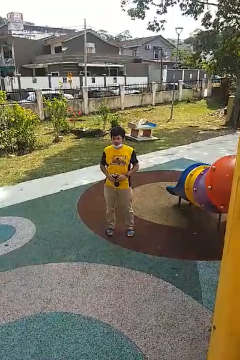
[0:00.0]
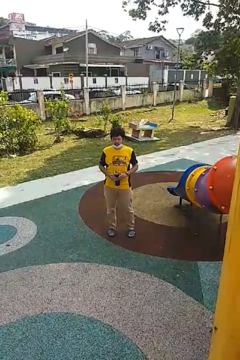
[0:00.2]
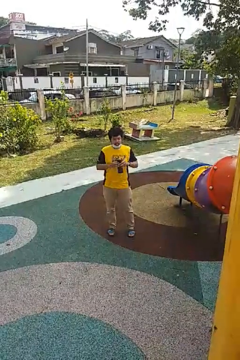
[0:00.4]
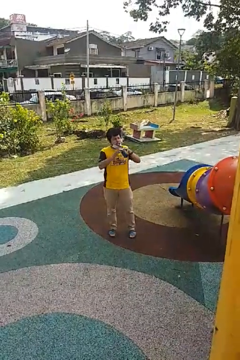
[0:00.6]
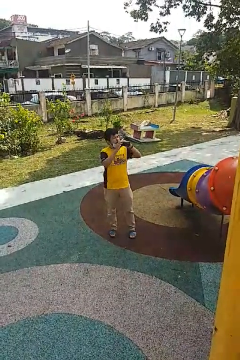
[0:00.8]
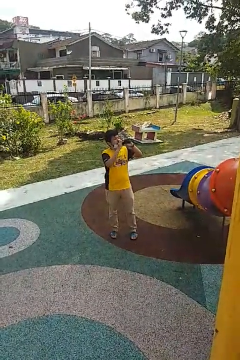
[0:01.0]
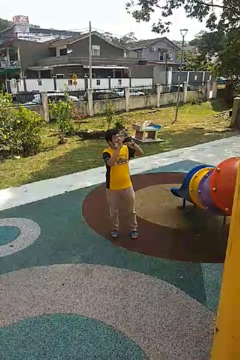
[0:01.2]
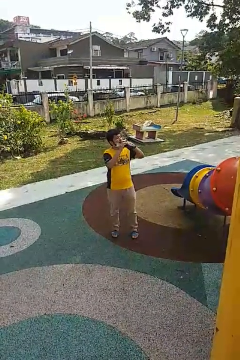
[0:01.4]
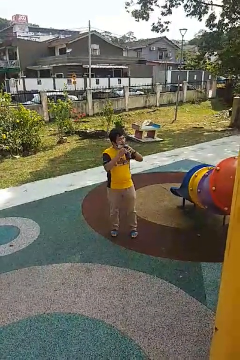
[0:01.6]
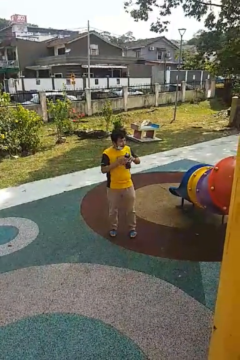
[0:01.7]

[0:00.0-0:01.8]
person drinks from bottle

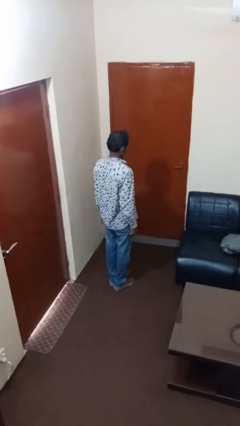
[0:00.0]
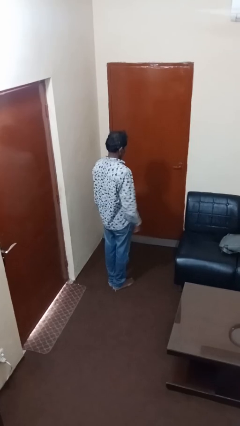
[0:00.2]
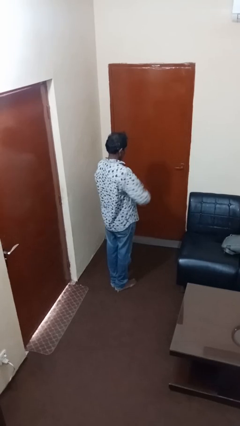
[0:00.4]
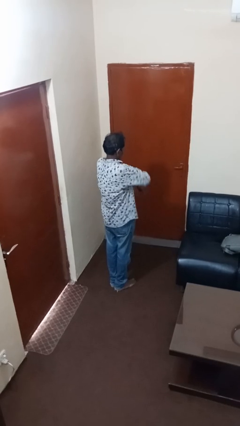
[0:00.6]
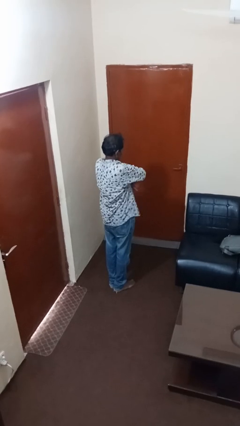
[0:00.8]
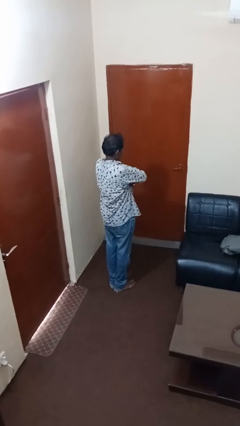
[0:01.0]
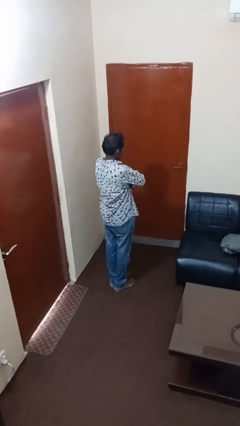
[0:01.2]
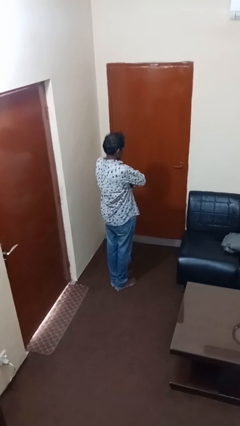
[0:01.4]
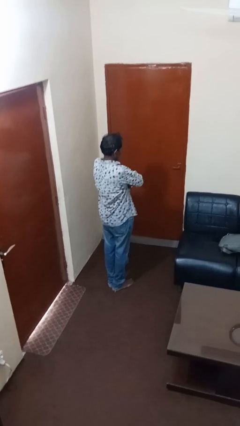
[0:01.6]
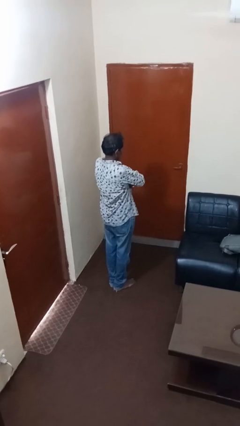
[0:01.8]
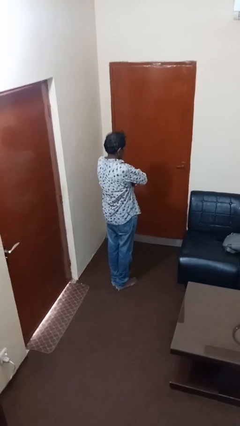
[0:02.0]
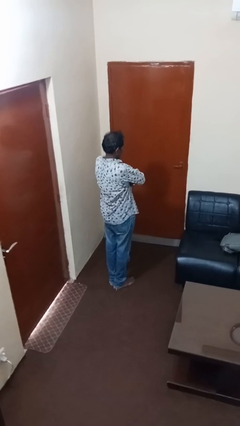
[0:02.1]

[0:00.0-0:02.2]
person crosses arms

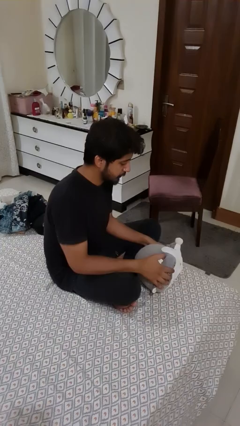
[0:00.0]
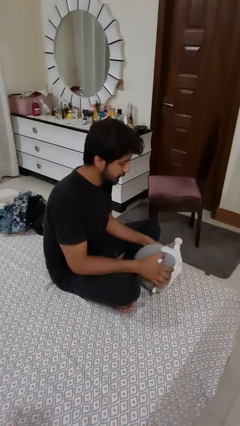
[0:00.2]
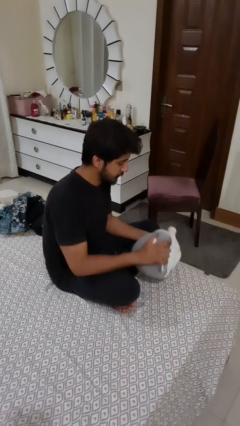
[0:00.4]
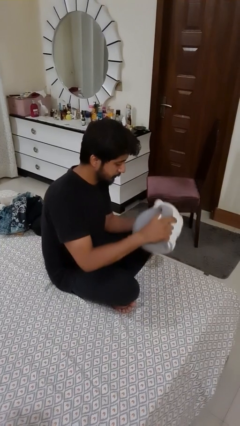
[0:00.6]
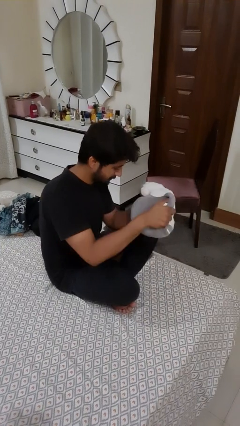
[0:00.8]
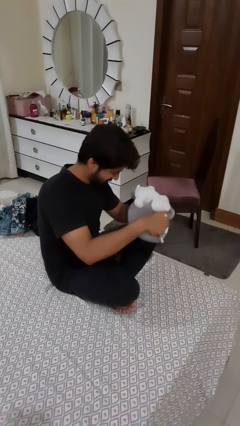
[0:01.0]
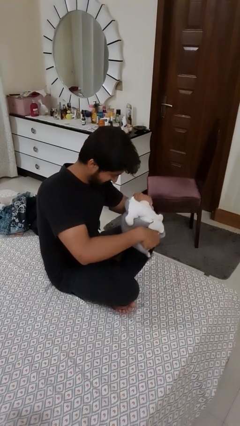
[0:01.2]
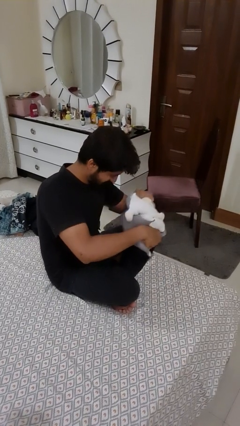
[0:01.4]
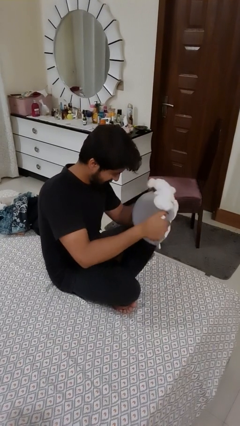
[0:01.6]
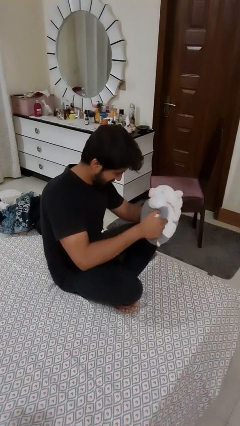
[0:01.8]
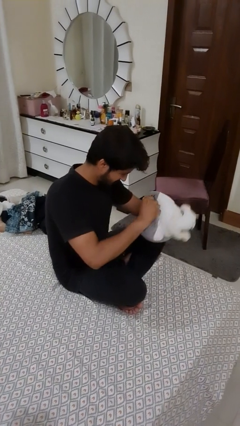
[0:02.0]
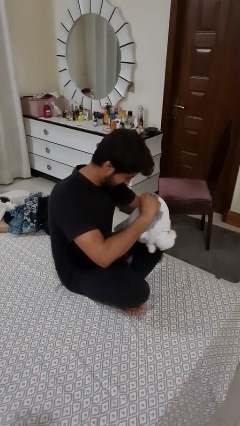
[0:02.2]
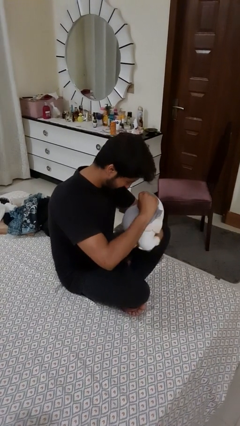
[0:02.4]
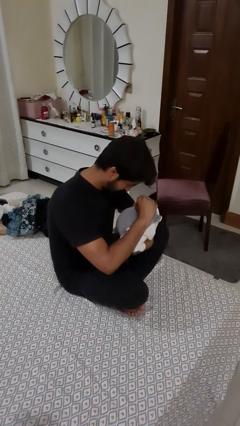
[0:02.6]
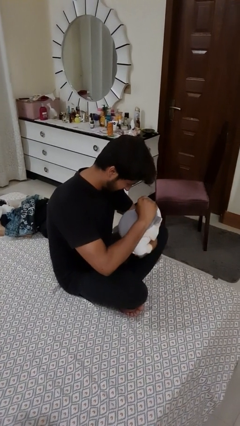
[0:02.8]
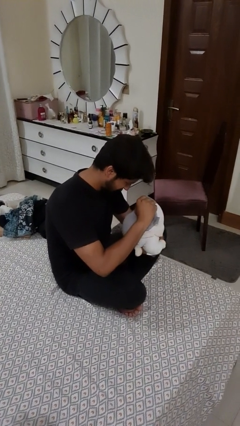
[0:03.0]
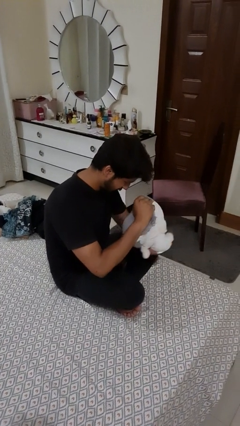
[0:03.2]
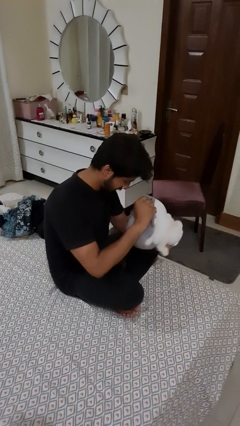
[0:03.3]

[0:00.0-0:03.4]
person squeezes object

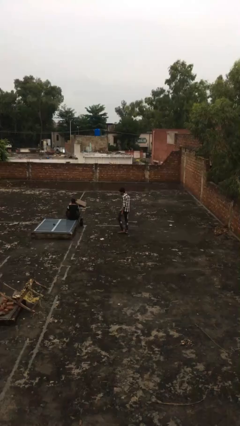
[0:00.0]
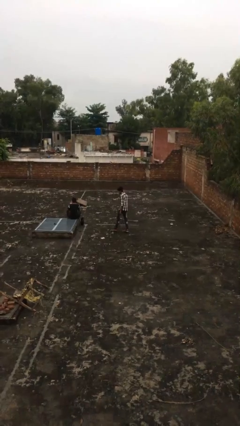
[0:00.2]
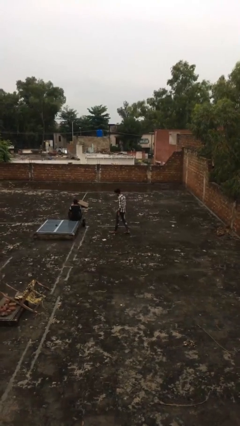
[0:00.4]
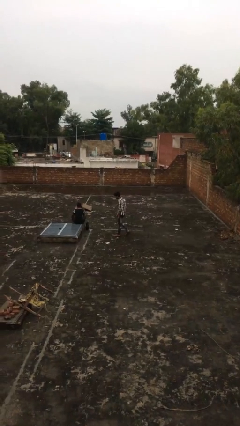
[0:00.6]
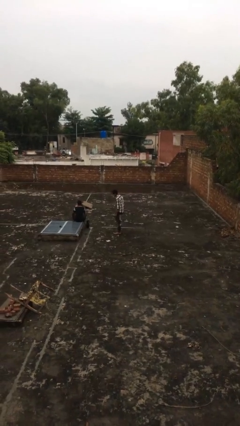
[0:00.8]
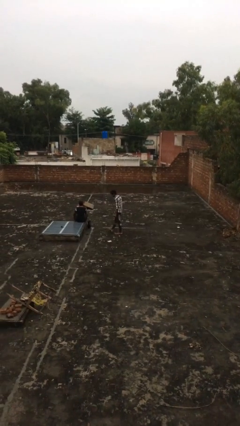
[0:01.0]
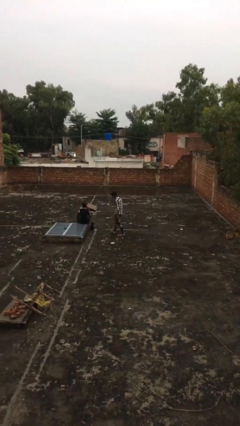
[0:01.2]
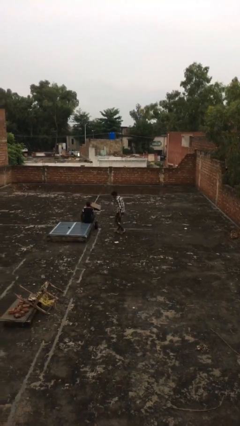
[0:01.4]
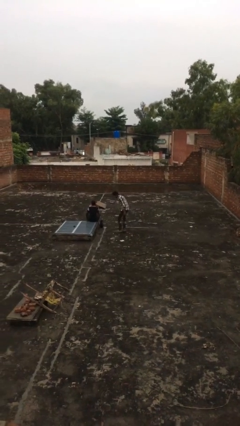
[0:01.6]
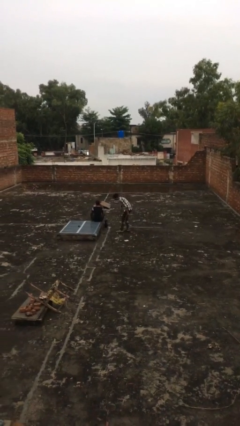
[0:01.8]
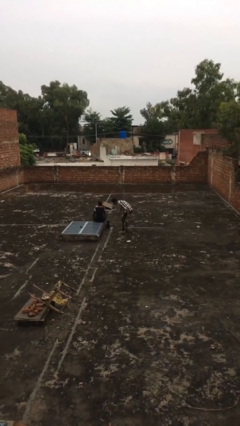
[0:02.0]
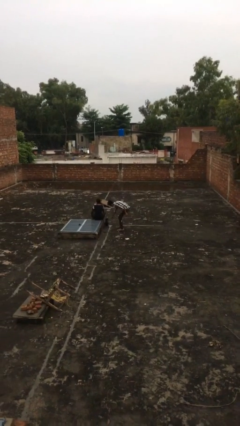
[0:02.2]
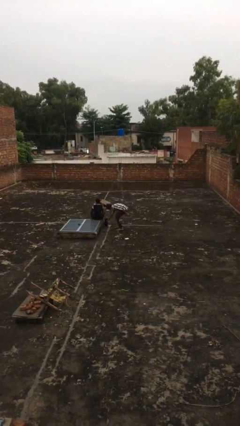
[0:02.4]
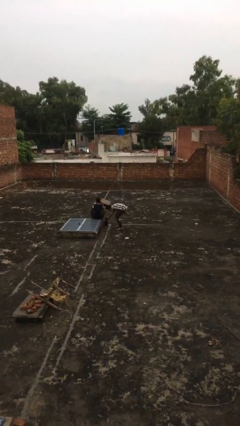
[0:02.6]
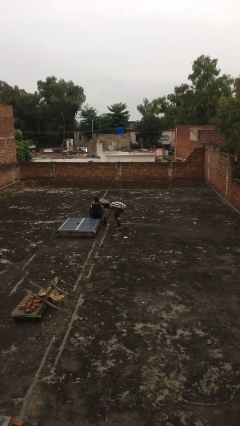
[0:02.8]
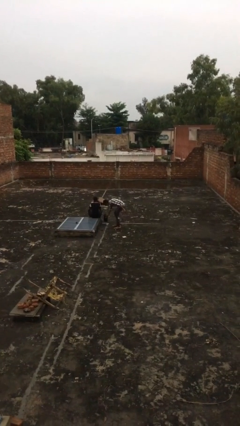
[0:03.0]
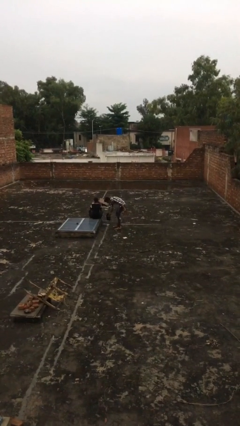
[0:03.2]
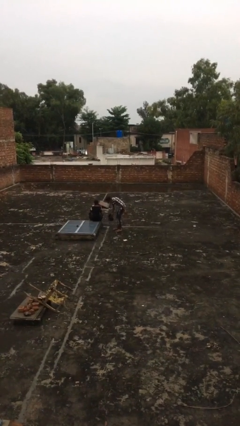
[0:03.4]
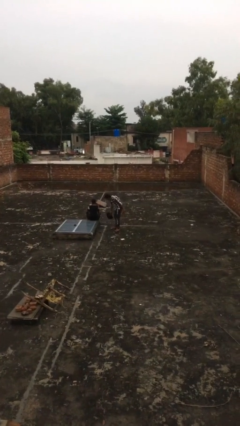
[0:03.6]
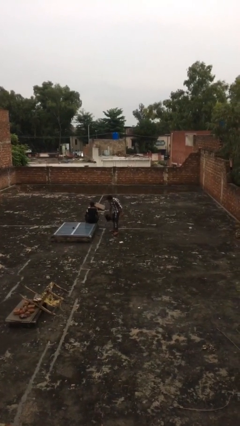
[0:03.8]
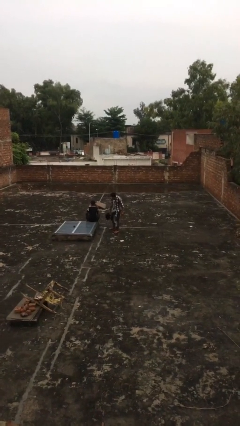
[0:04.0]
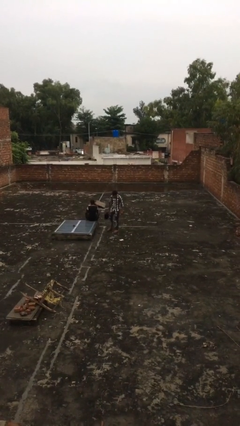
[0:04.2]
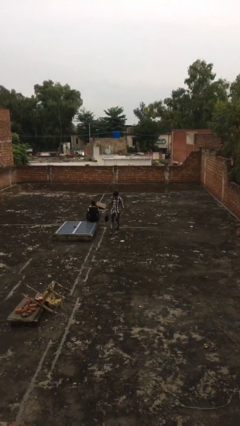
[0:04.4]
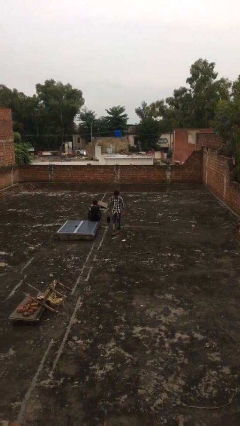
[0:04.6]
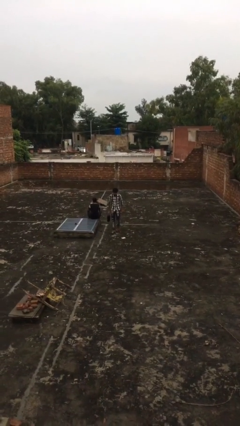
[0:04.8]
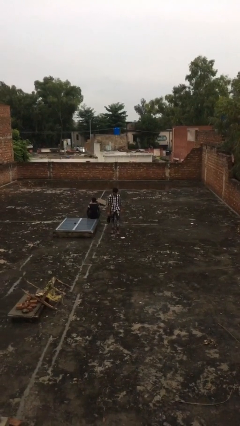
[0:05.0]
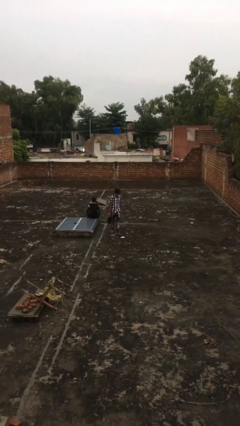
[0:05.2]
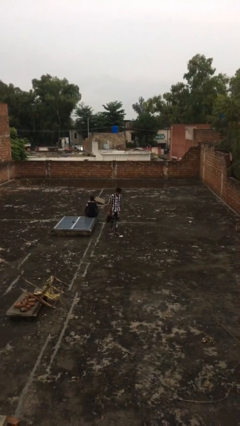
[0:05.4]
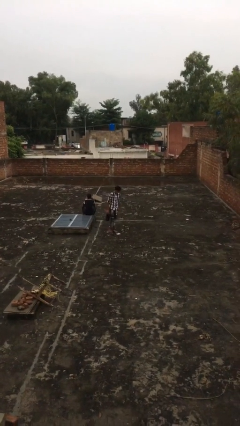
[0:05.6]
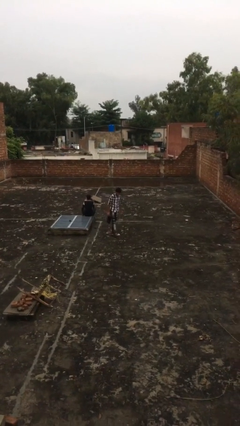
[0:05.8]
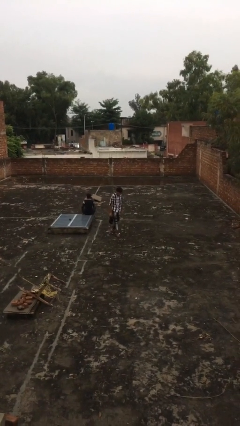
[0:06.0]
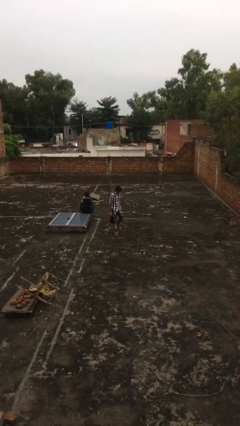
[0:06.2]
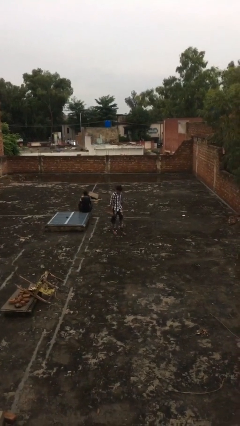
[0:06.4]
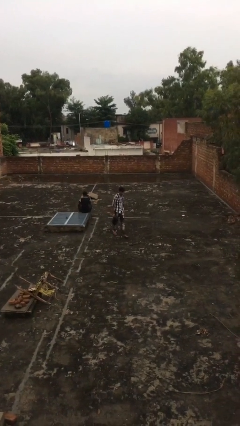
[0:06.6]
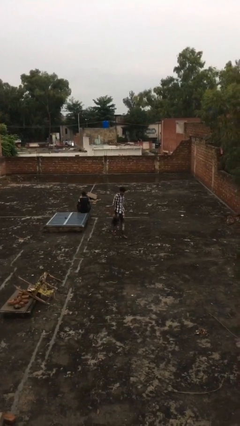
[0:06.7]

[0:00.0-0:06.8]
person steals object from person

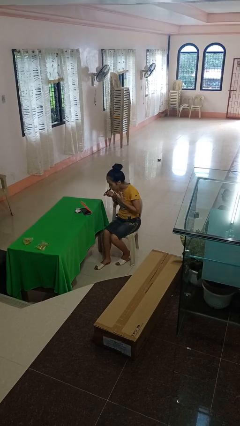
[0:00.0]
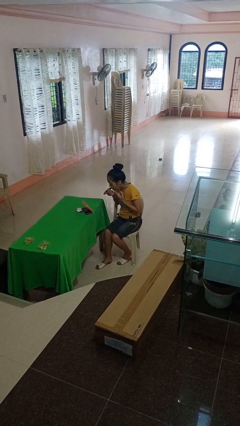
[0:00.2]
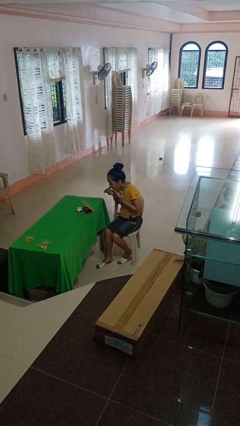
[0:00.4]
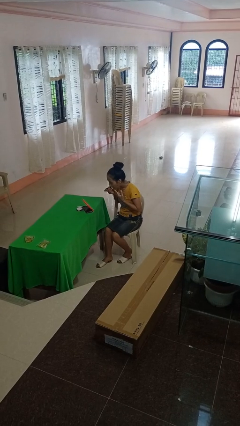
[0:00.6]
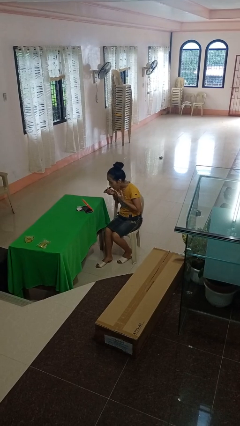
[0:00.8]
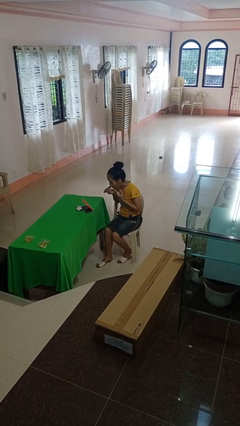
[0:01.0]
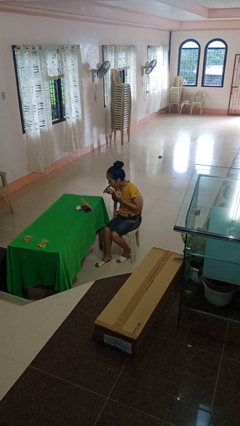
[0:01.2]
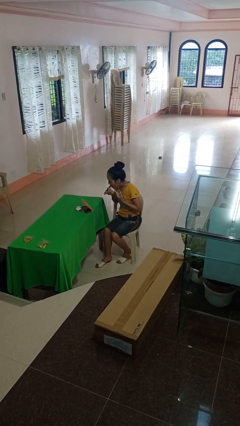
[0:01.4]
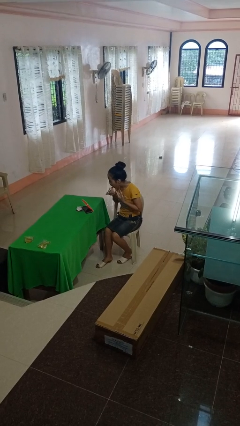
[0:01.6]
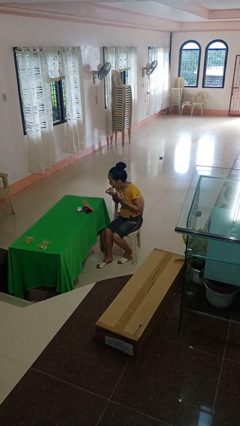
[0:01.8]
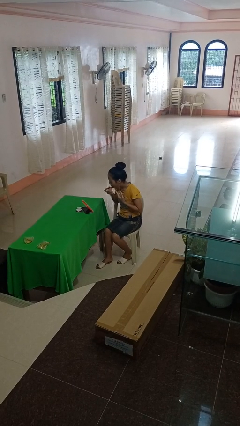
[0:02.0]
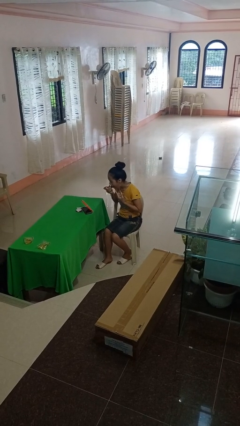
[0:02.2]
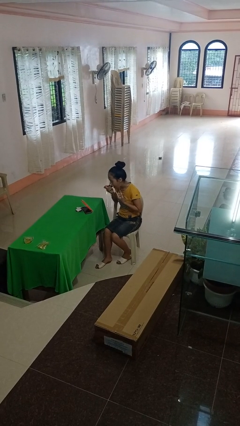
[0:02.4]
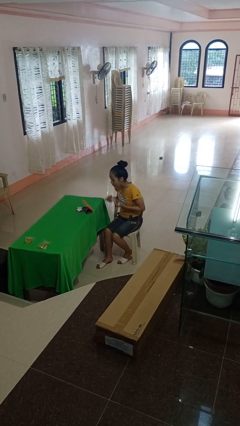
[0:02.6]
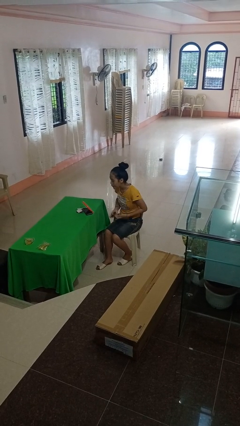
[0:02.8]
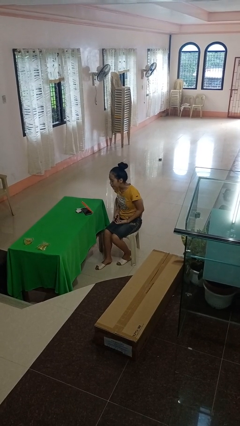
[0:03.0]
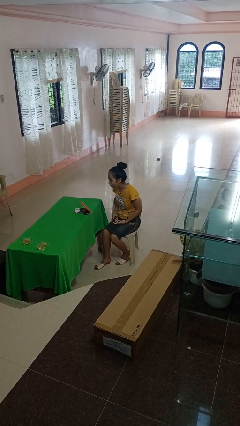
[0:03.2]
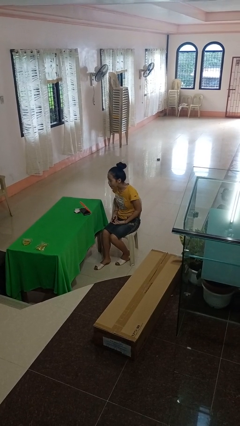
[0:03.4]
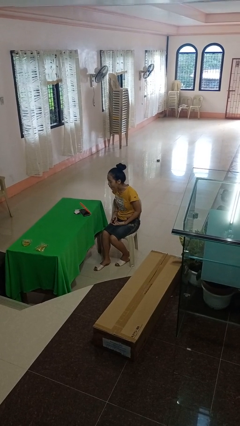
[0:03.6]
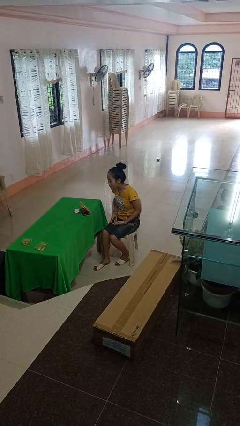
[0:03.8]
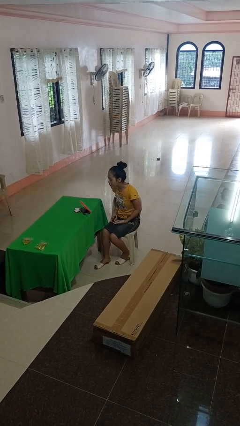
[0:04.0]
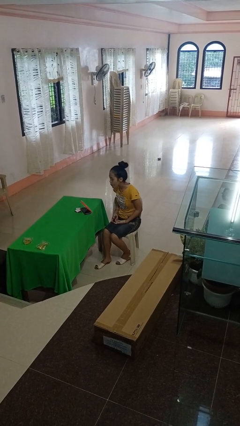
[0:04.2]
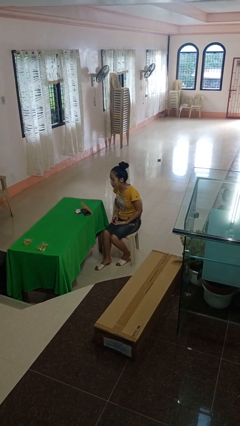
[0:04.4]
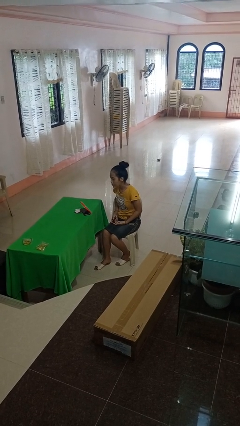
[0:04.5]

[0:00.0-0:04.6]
person applies lip makeup
